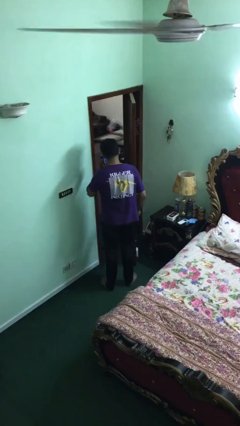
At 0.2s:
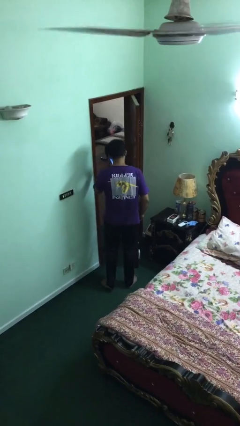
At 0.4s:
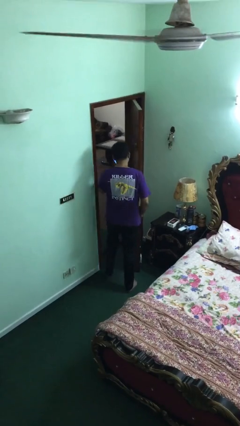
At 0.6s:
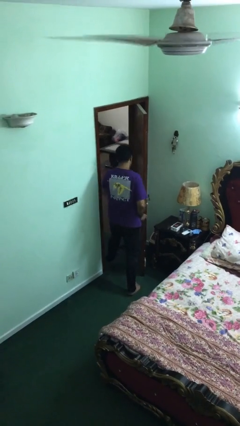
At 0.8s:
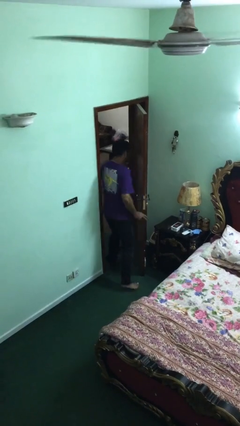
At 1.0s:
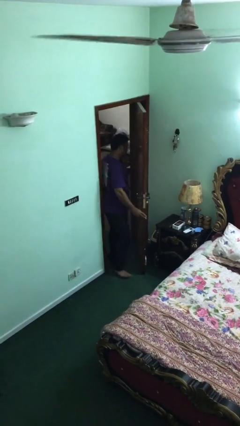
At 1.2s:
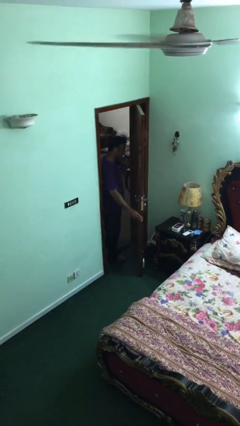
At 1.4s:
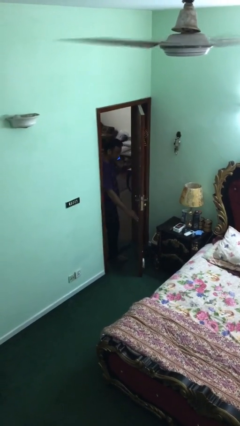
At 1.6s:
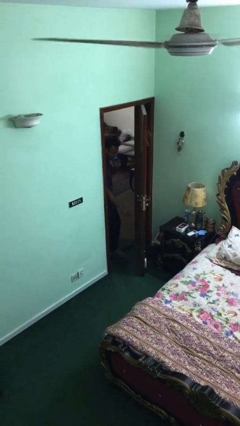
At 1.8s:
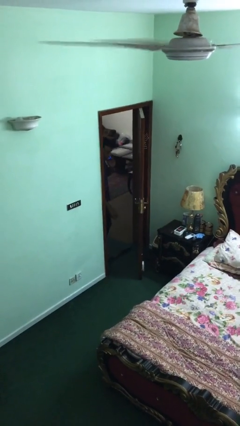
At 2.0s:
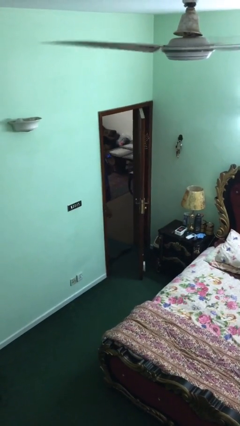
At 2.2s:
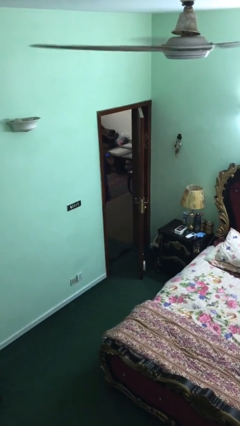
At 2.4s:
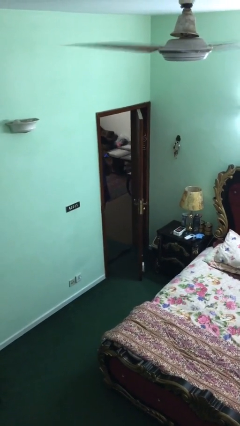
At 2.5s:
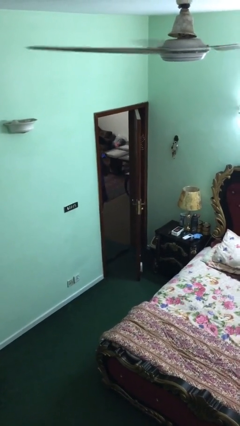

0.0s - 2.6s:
person exits scene through structure

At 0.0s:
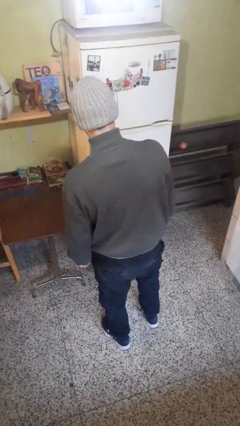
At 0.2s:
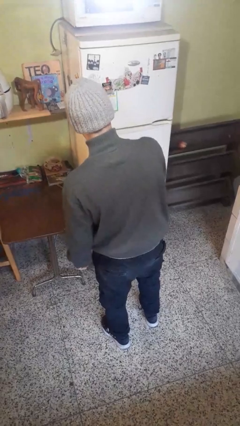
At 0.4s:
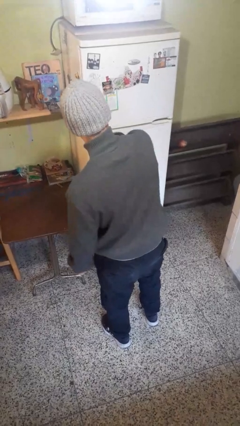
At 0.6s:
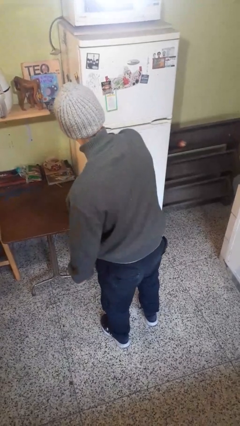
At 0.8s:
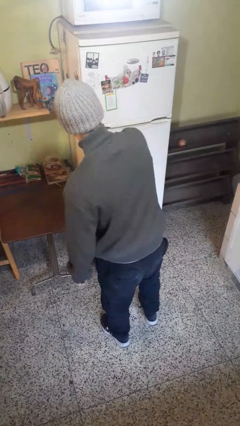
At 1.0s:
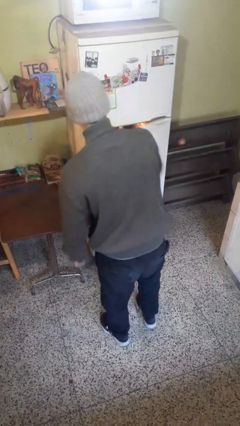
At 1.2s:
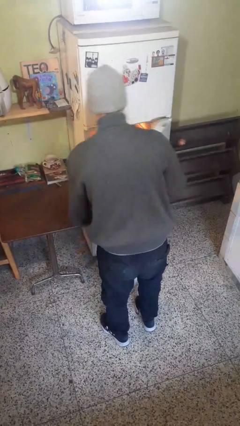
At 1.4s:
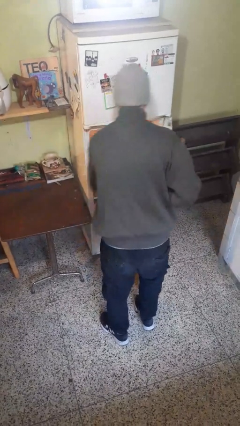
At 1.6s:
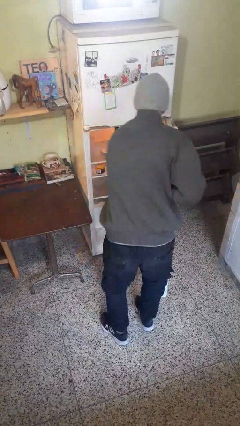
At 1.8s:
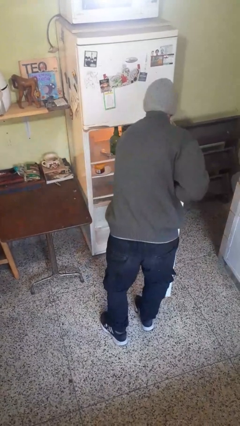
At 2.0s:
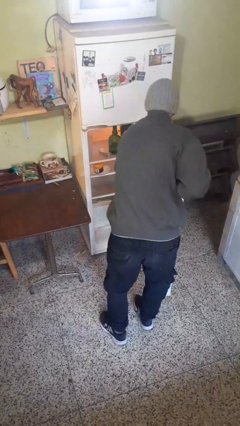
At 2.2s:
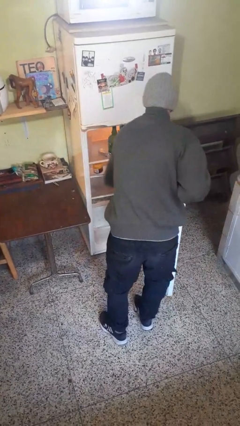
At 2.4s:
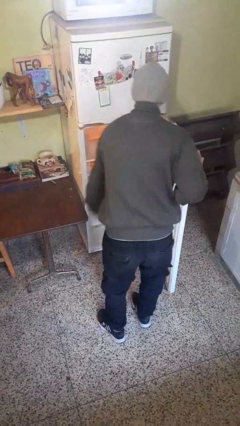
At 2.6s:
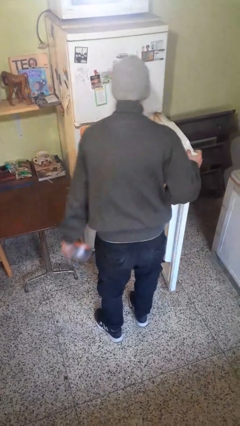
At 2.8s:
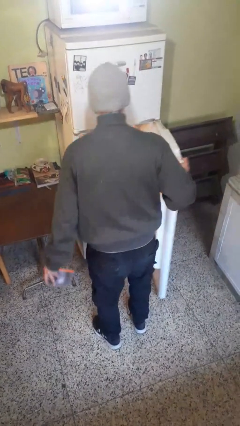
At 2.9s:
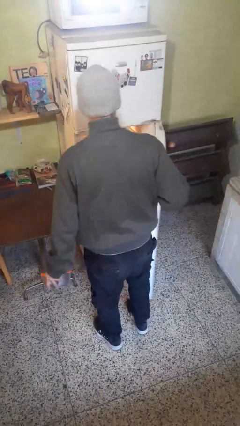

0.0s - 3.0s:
person takes object from refrigerator

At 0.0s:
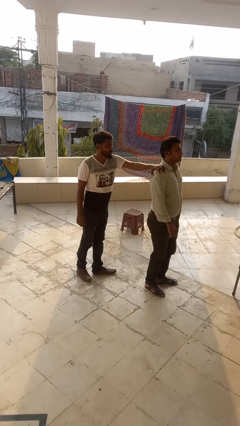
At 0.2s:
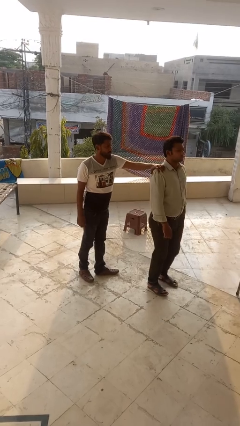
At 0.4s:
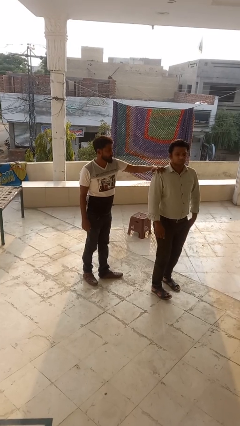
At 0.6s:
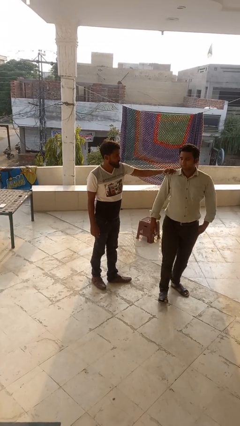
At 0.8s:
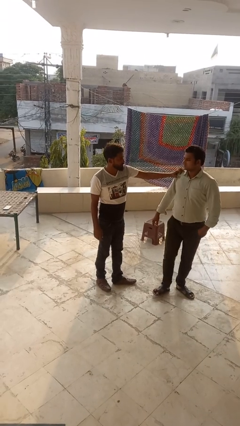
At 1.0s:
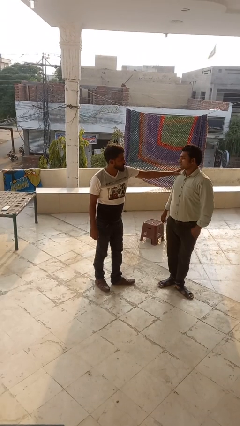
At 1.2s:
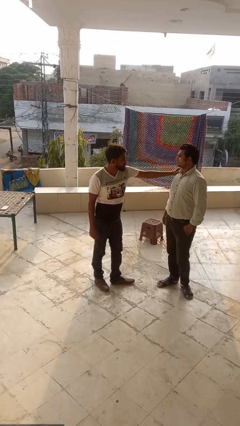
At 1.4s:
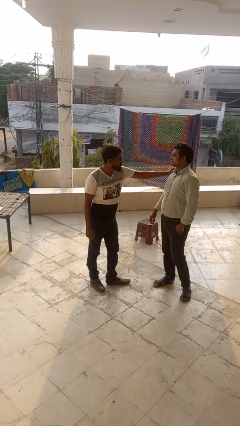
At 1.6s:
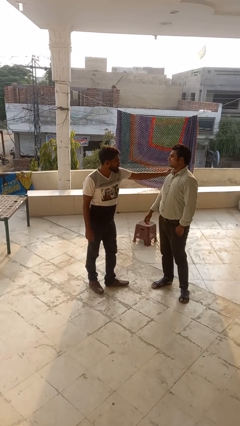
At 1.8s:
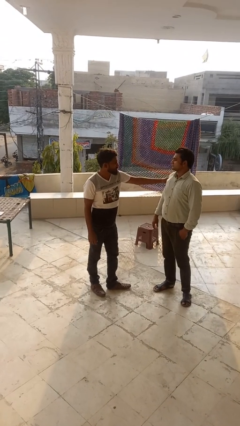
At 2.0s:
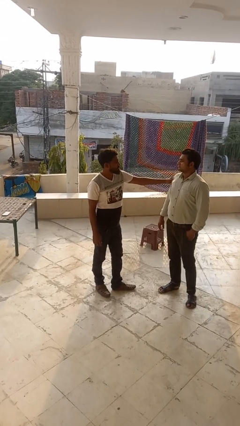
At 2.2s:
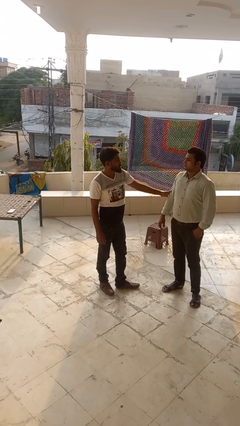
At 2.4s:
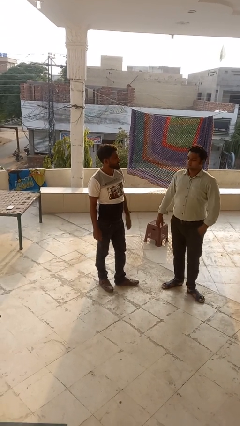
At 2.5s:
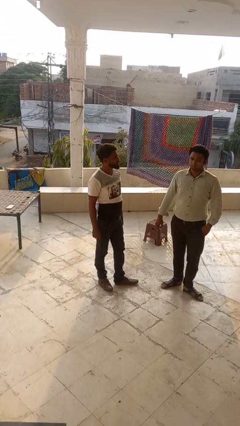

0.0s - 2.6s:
person spins person around

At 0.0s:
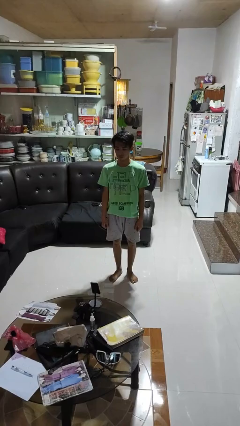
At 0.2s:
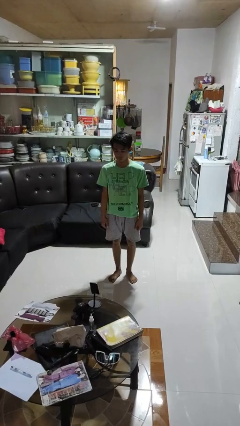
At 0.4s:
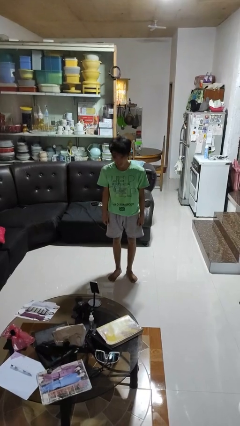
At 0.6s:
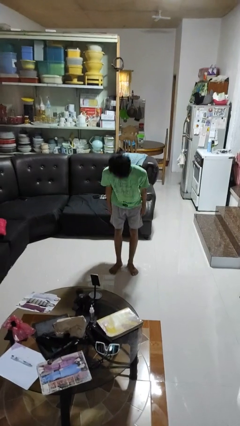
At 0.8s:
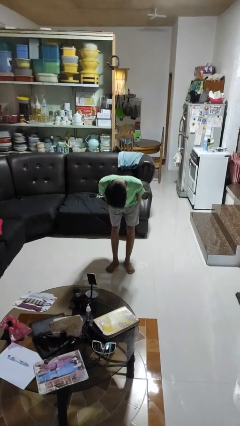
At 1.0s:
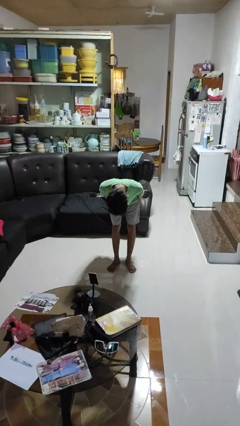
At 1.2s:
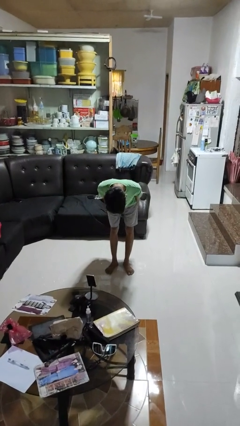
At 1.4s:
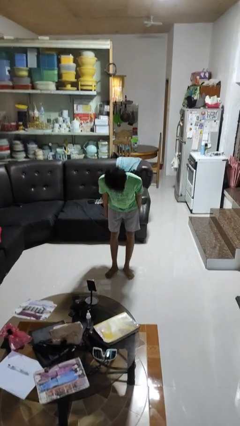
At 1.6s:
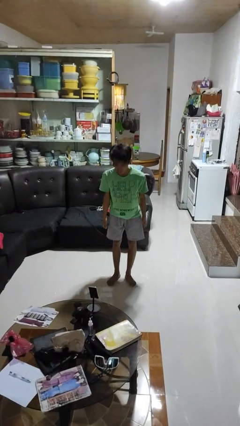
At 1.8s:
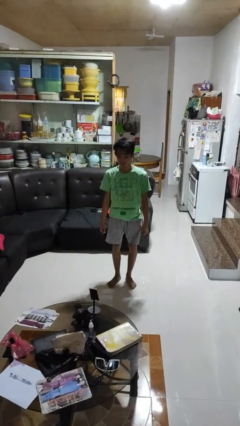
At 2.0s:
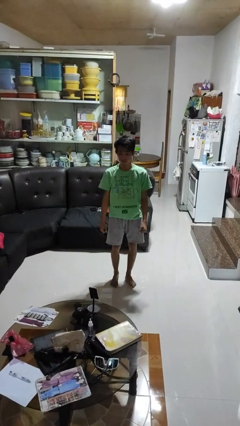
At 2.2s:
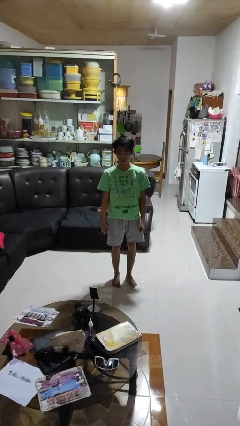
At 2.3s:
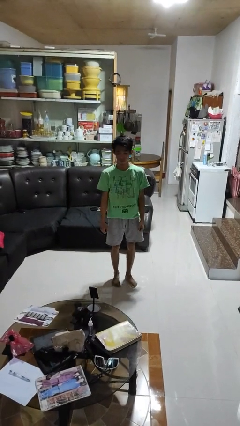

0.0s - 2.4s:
person bows

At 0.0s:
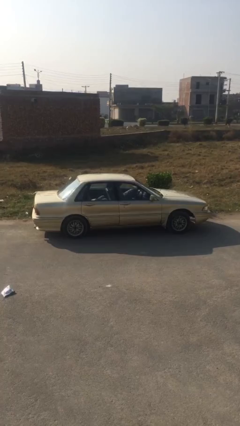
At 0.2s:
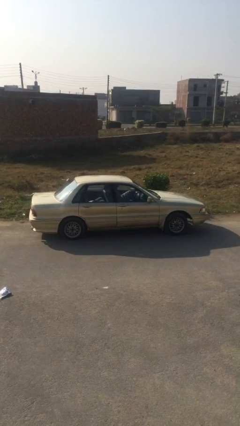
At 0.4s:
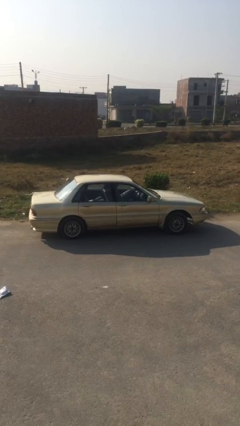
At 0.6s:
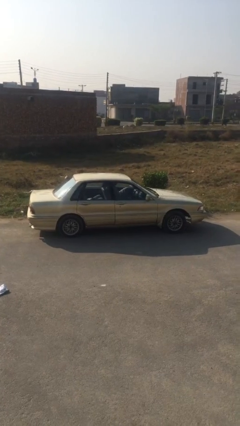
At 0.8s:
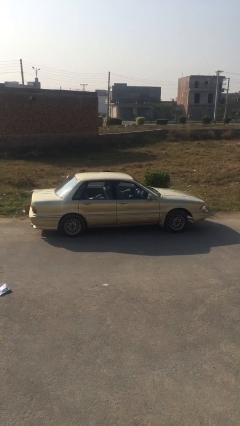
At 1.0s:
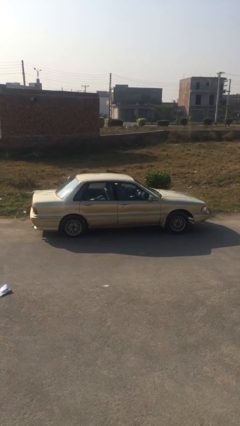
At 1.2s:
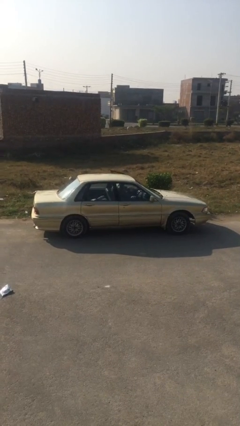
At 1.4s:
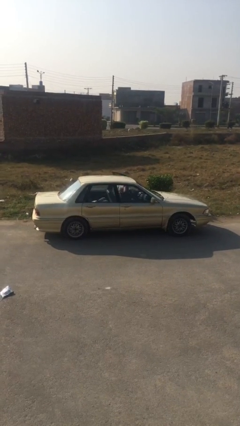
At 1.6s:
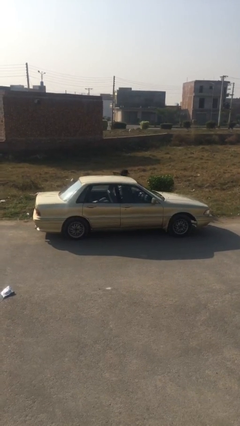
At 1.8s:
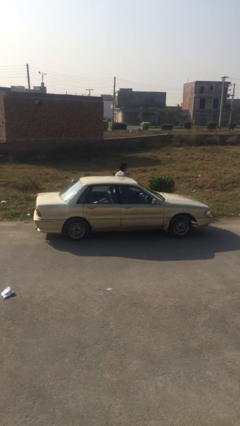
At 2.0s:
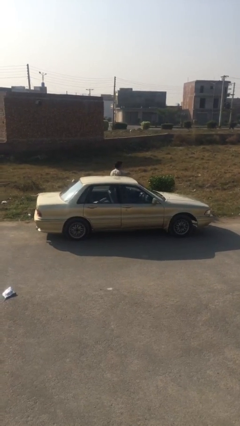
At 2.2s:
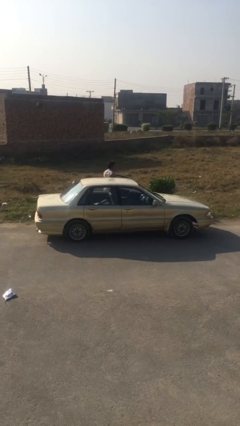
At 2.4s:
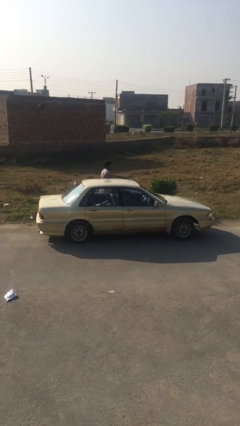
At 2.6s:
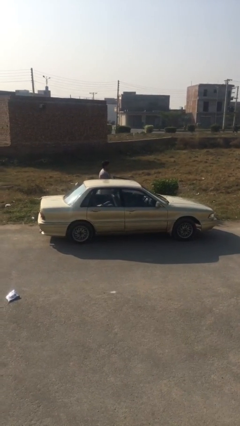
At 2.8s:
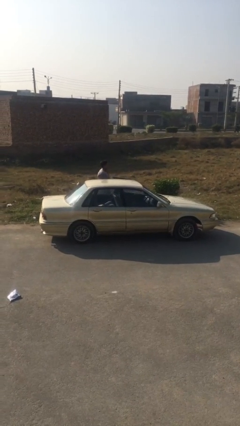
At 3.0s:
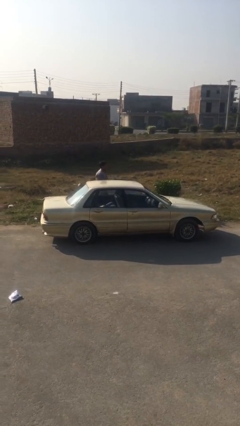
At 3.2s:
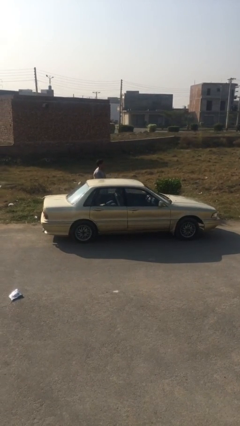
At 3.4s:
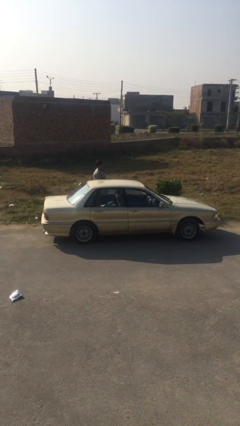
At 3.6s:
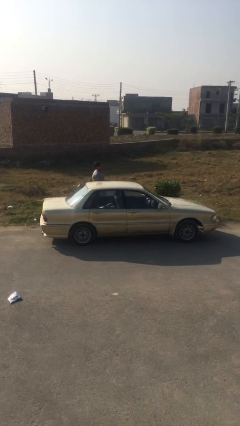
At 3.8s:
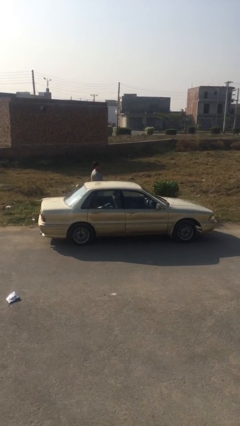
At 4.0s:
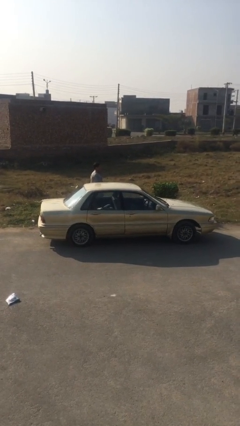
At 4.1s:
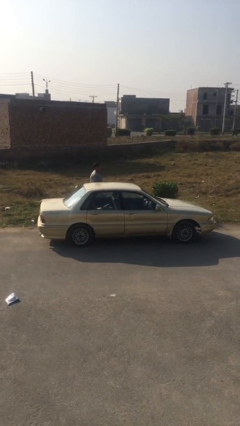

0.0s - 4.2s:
car drops off person

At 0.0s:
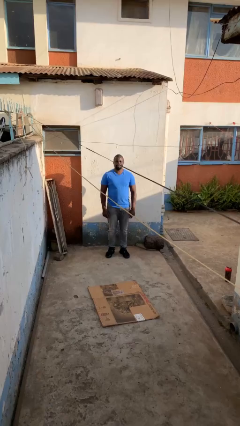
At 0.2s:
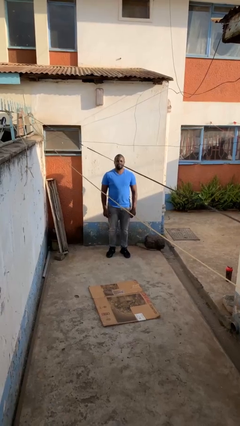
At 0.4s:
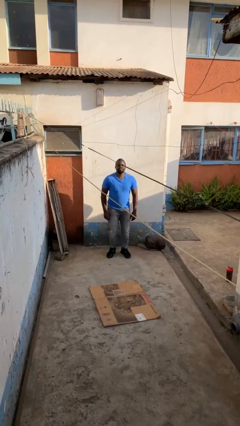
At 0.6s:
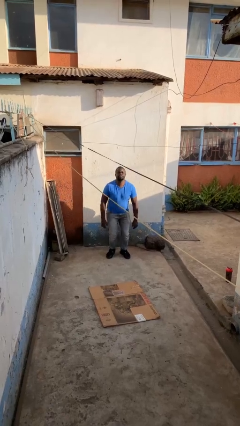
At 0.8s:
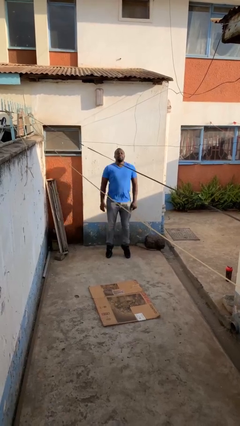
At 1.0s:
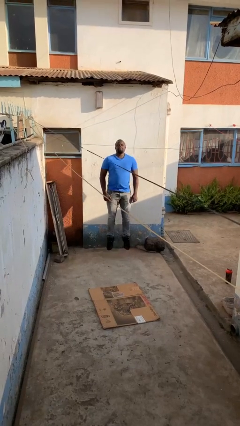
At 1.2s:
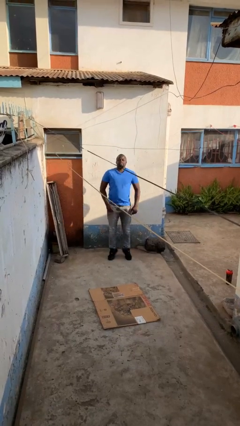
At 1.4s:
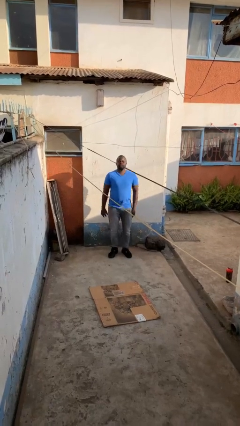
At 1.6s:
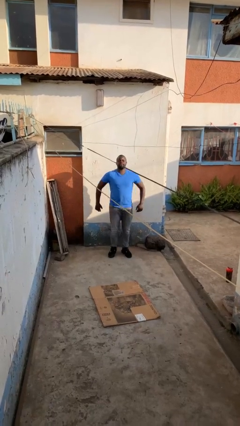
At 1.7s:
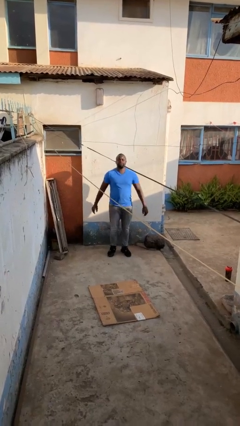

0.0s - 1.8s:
person jumps

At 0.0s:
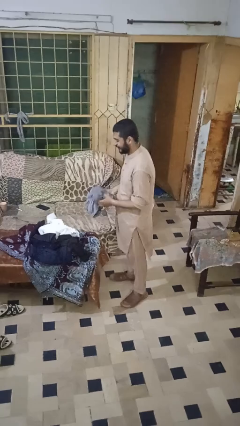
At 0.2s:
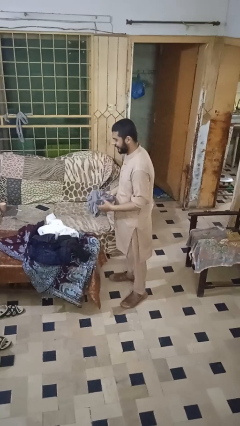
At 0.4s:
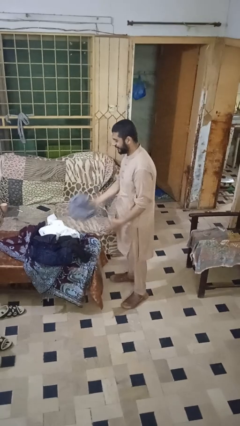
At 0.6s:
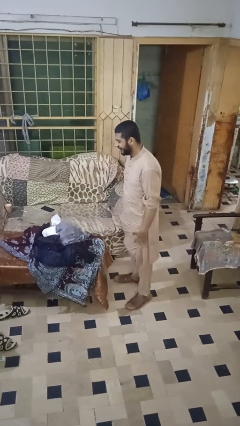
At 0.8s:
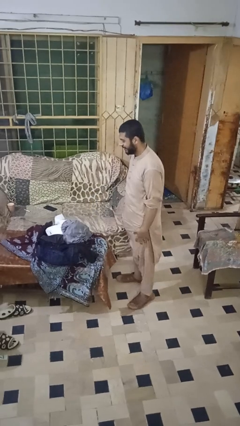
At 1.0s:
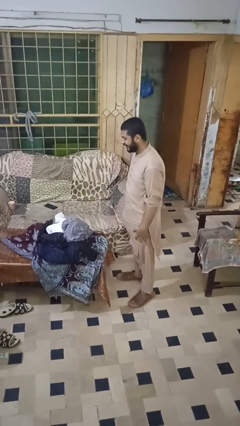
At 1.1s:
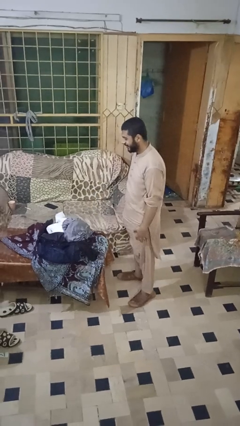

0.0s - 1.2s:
person folds pants
